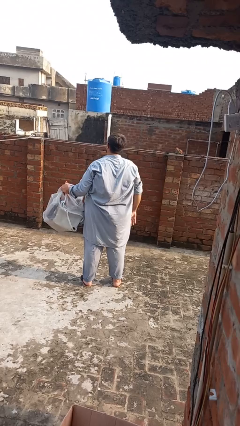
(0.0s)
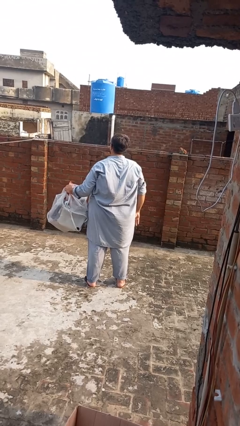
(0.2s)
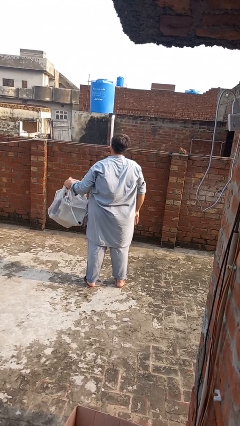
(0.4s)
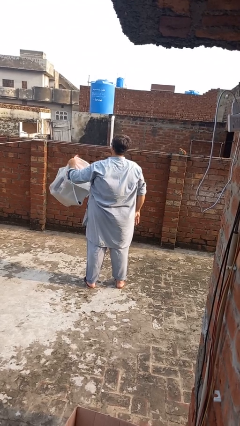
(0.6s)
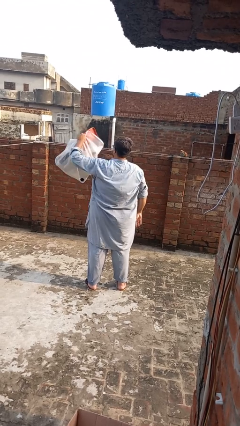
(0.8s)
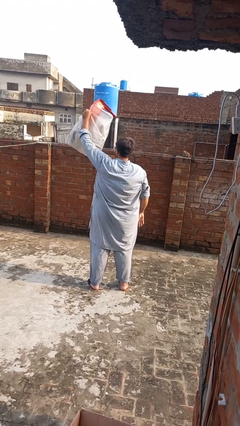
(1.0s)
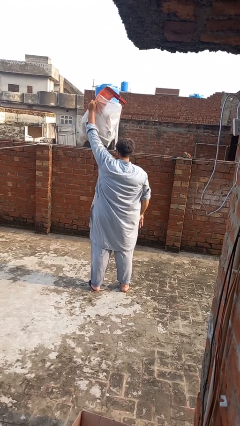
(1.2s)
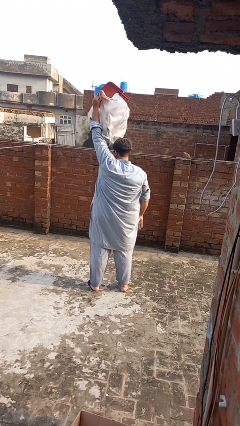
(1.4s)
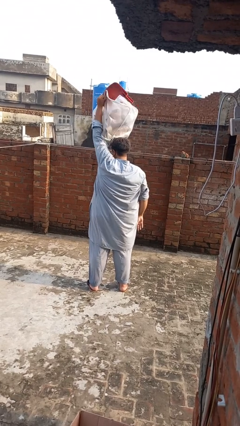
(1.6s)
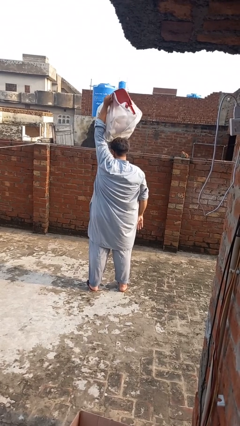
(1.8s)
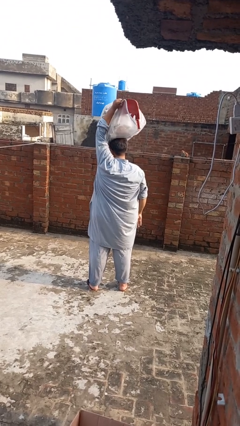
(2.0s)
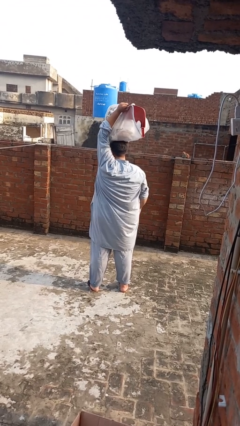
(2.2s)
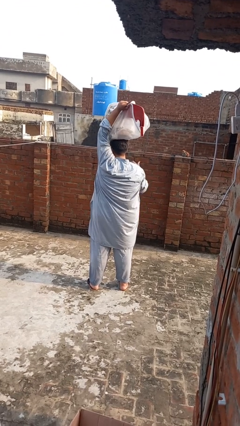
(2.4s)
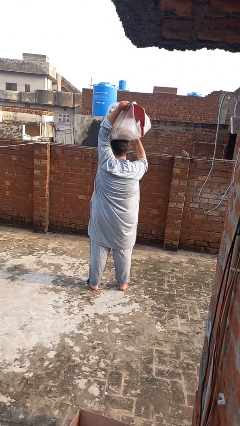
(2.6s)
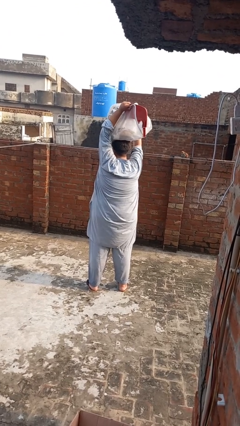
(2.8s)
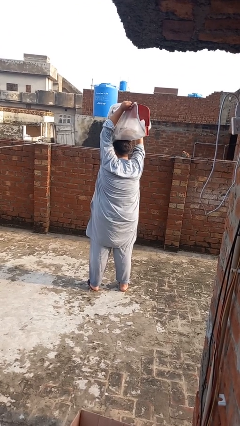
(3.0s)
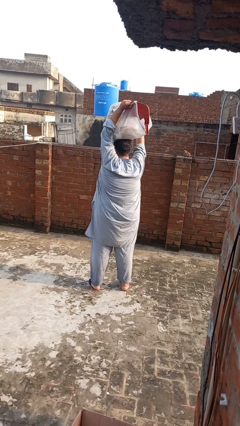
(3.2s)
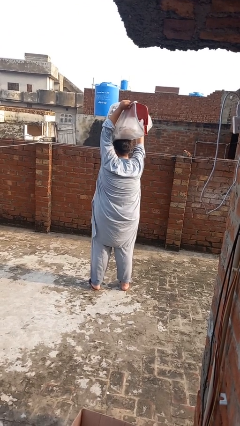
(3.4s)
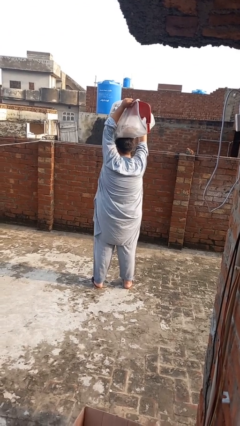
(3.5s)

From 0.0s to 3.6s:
person holds object above head

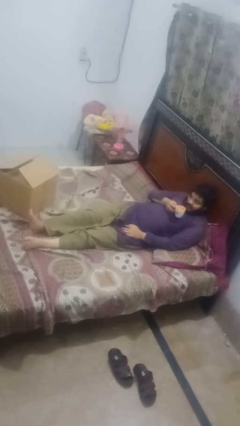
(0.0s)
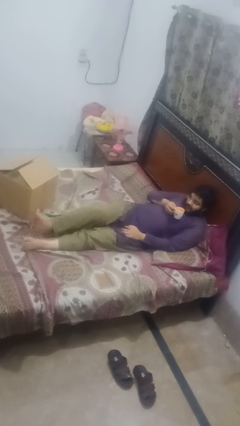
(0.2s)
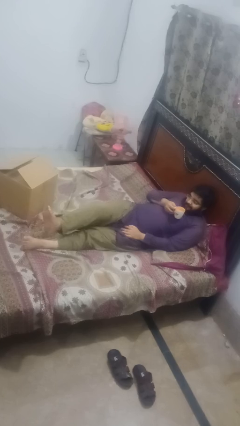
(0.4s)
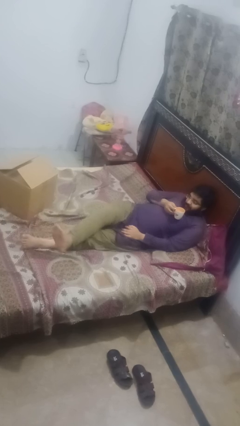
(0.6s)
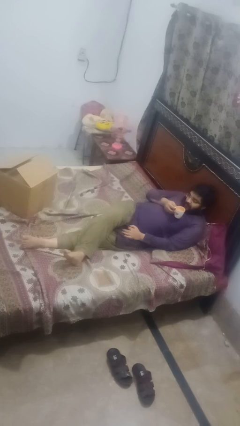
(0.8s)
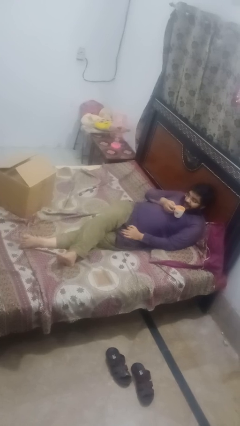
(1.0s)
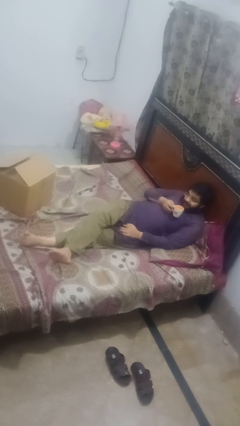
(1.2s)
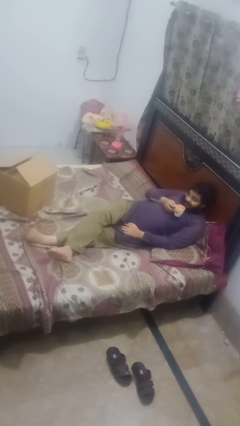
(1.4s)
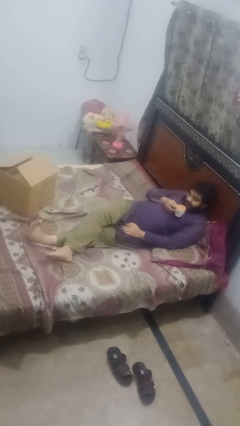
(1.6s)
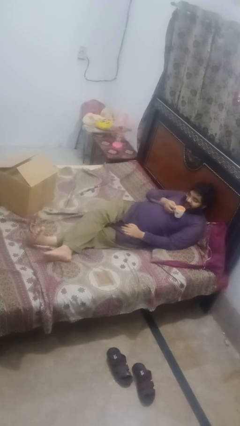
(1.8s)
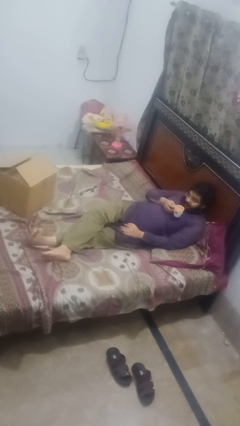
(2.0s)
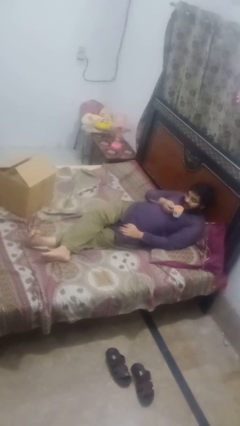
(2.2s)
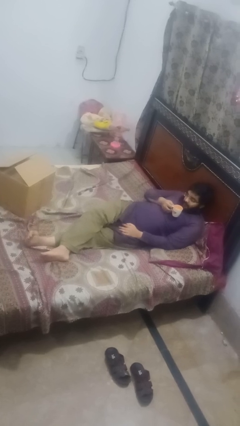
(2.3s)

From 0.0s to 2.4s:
person crosses legs

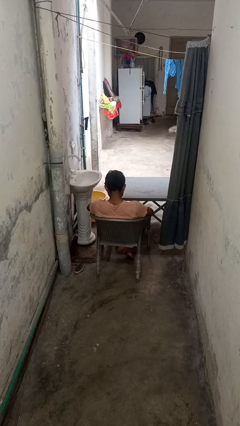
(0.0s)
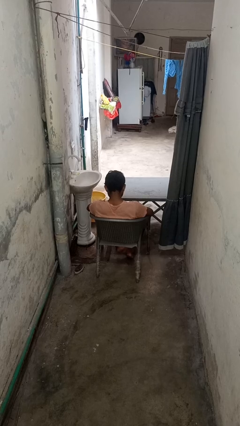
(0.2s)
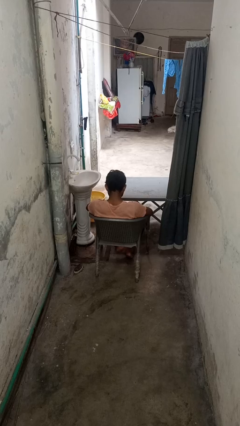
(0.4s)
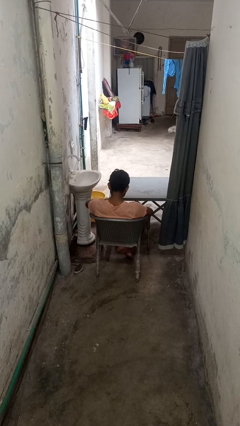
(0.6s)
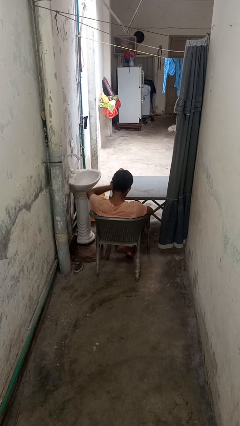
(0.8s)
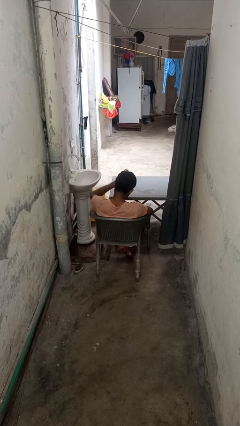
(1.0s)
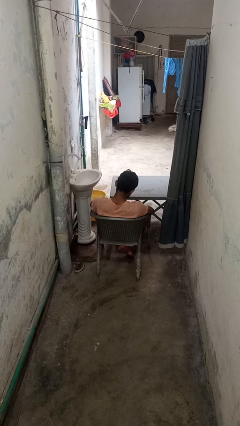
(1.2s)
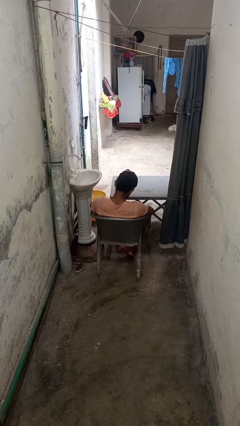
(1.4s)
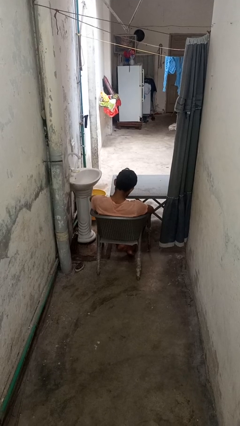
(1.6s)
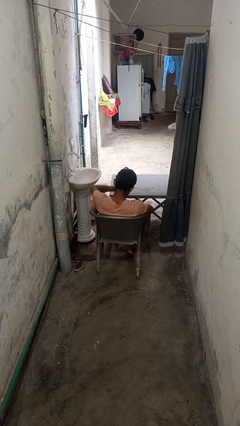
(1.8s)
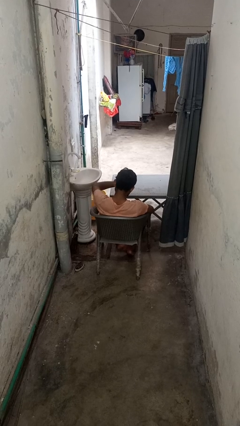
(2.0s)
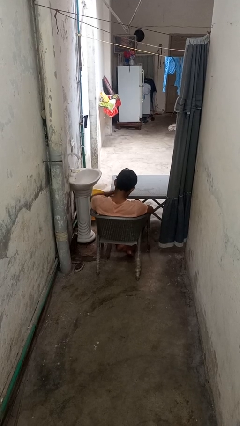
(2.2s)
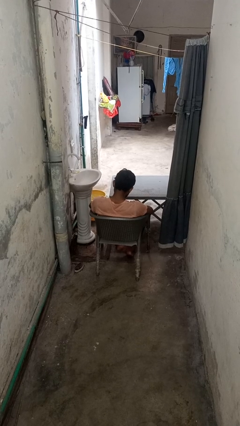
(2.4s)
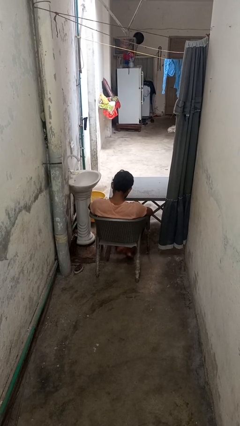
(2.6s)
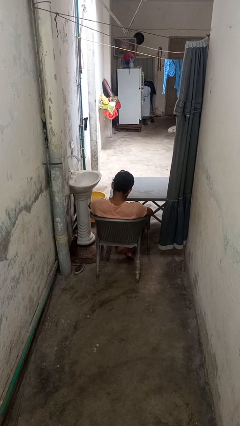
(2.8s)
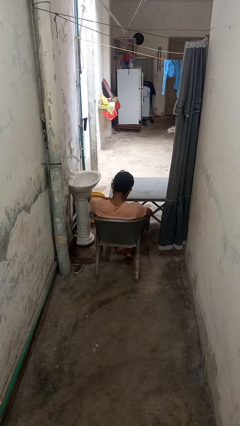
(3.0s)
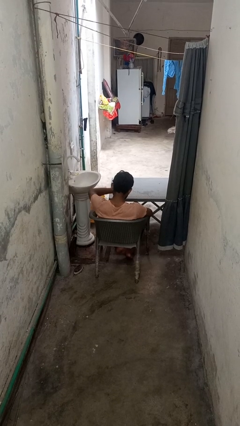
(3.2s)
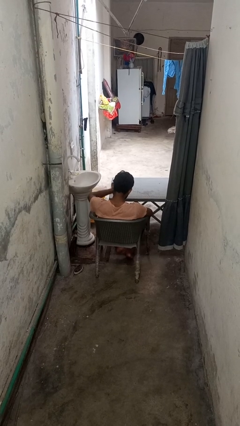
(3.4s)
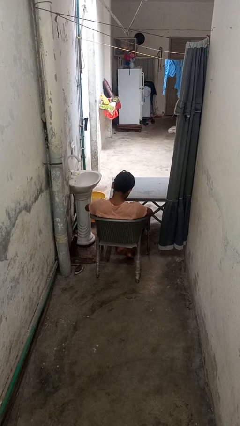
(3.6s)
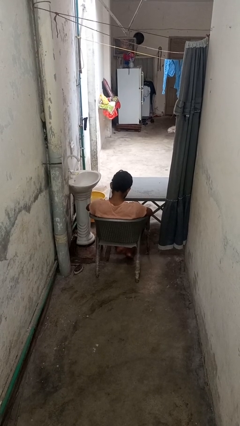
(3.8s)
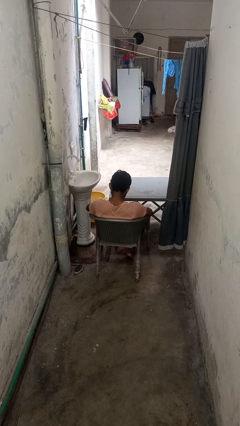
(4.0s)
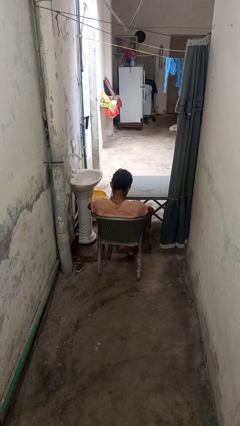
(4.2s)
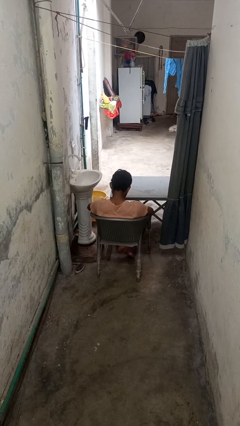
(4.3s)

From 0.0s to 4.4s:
person slaps hands on thighs

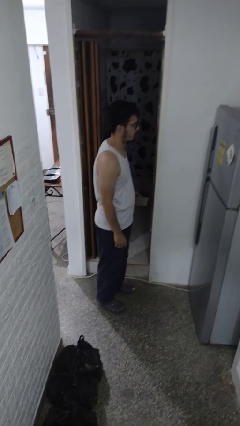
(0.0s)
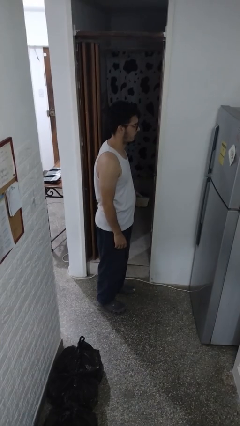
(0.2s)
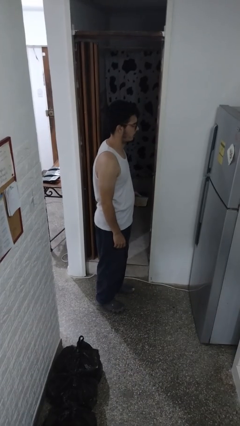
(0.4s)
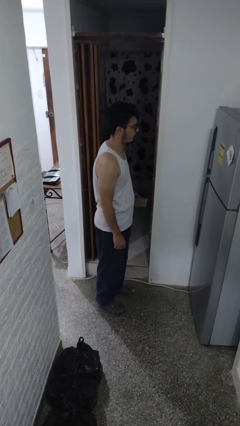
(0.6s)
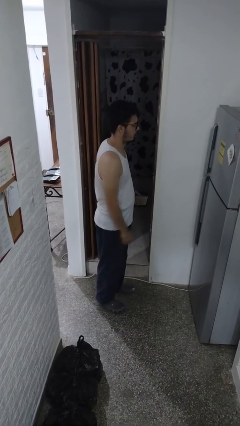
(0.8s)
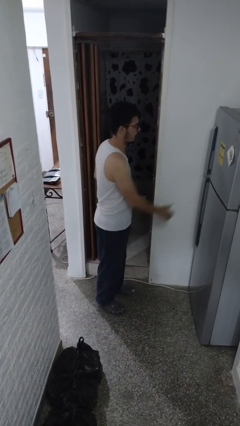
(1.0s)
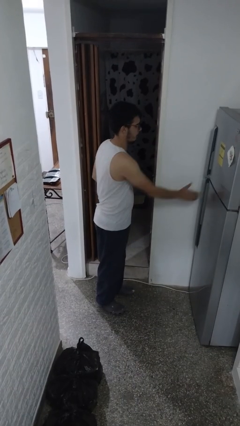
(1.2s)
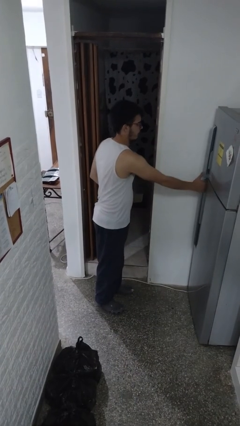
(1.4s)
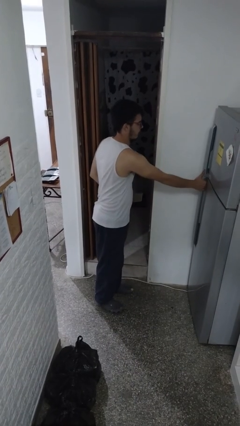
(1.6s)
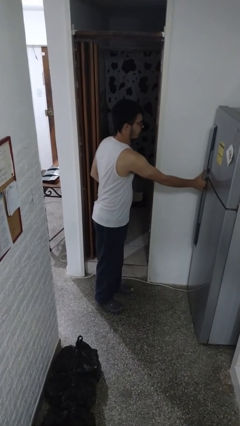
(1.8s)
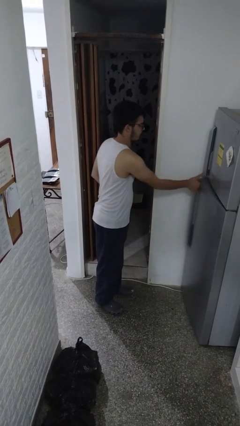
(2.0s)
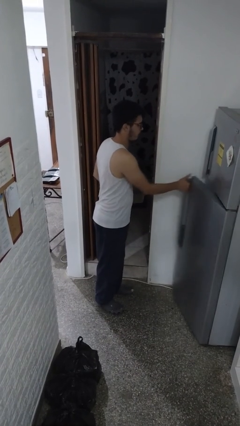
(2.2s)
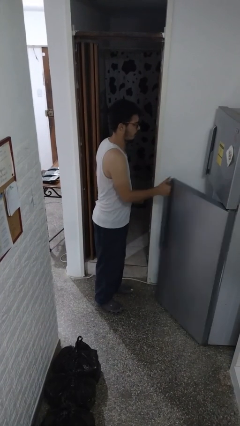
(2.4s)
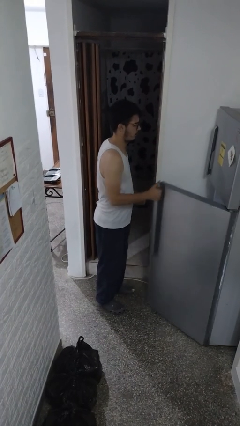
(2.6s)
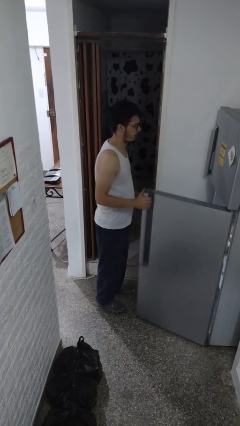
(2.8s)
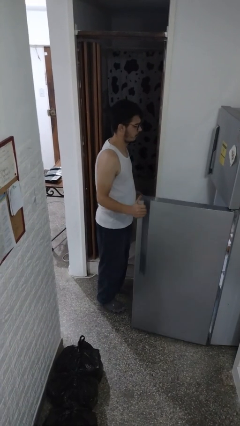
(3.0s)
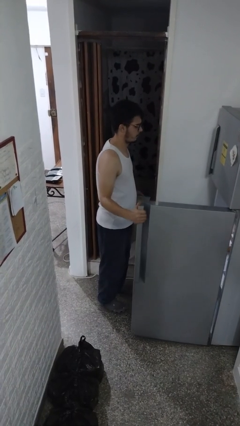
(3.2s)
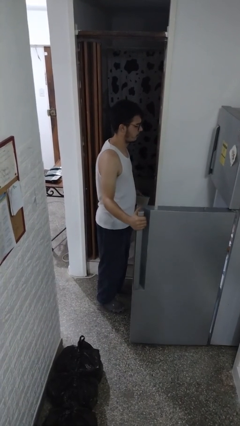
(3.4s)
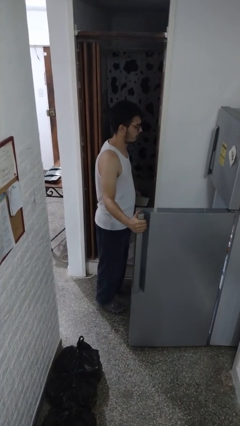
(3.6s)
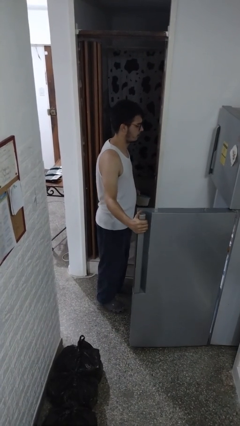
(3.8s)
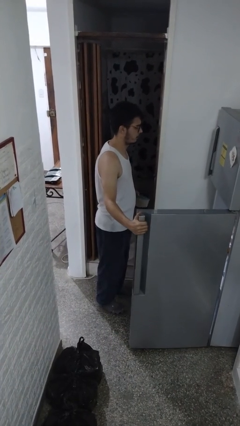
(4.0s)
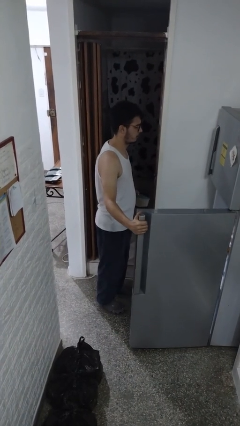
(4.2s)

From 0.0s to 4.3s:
person opens refrigerator

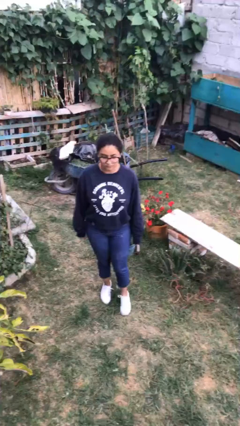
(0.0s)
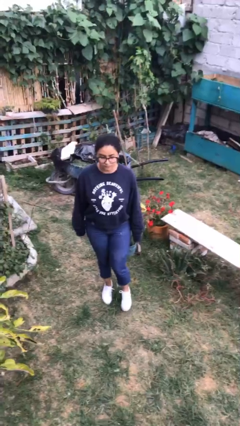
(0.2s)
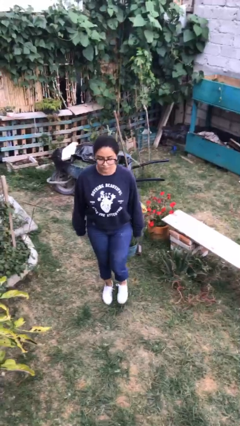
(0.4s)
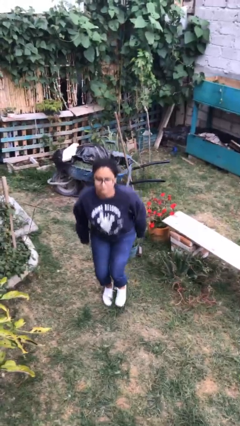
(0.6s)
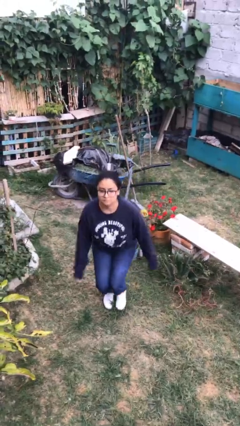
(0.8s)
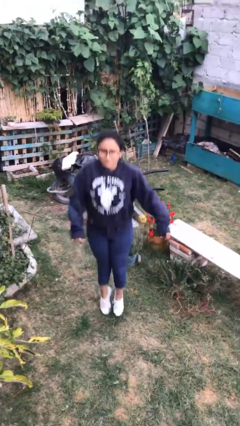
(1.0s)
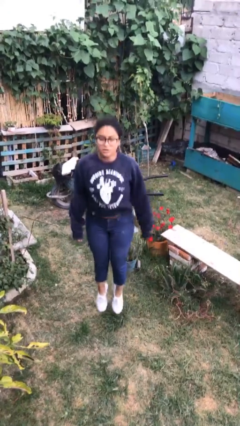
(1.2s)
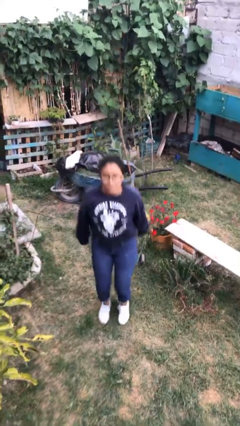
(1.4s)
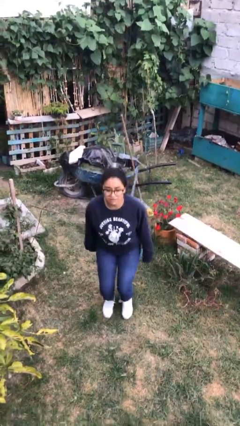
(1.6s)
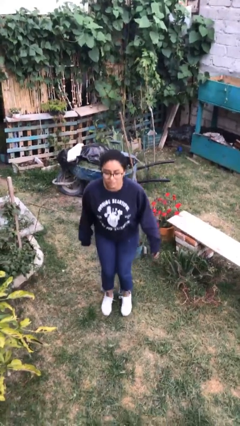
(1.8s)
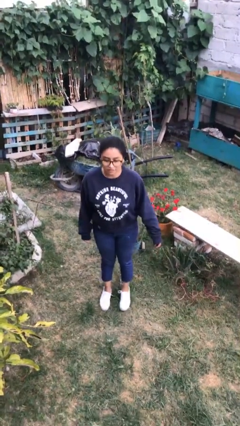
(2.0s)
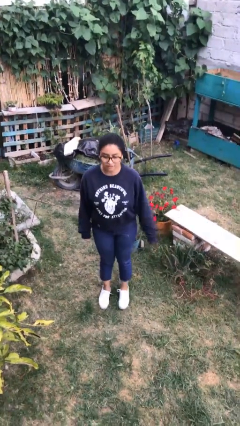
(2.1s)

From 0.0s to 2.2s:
person jumps

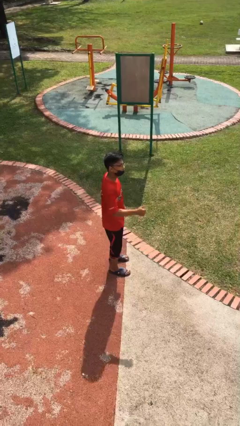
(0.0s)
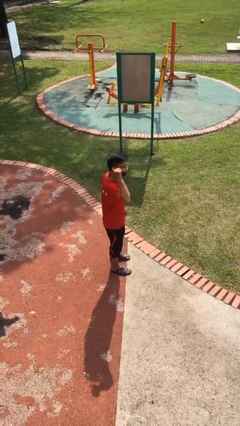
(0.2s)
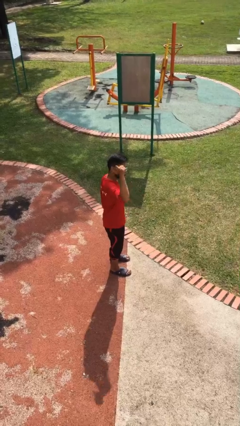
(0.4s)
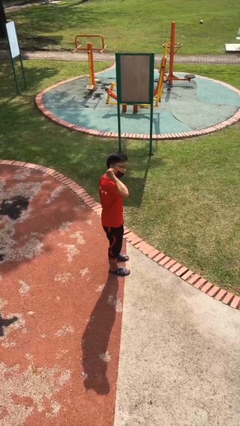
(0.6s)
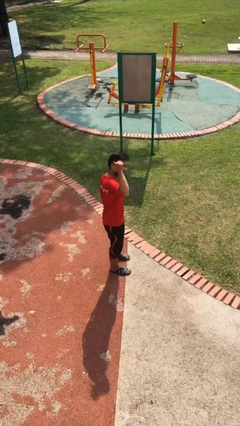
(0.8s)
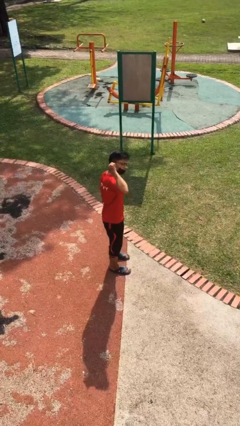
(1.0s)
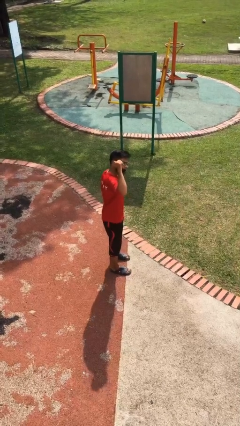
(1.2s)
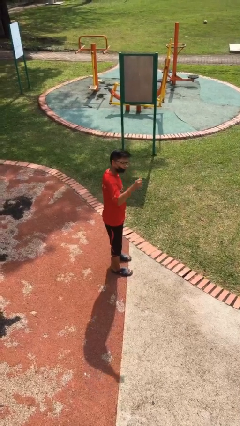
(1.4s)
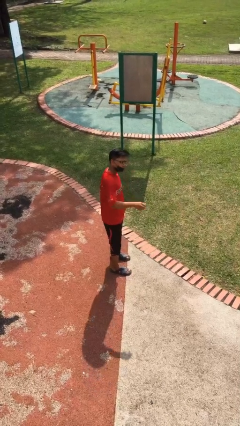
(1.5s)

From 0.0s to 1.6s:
person gestures behind me
